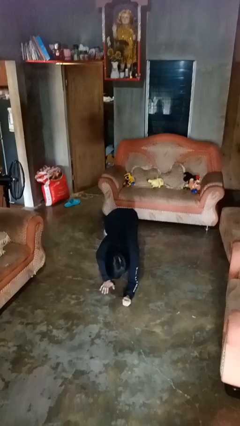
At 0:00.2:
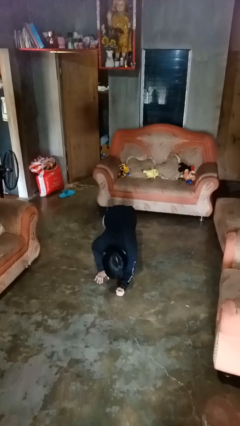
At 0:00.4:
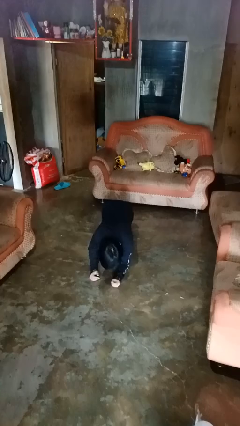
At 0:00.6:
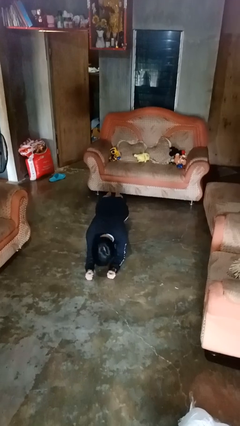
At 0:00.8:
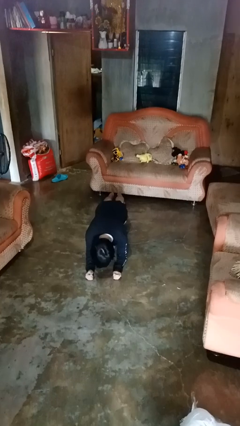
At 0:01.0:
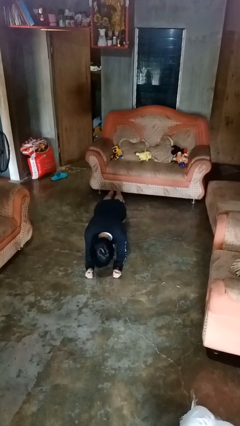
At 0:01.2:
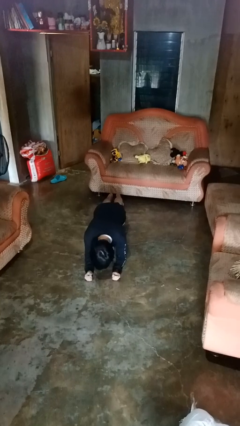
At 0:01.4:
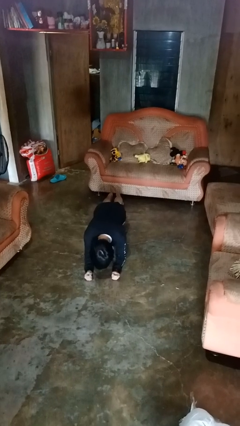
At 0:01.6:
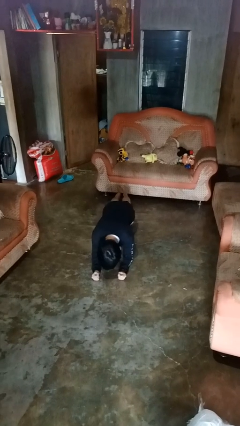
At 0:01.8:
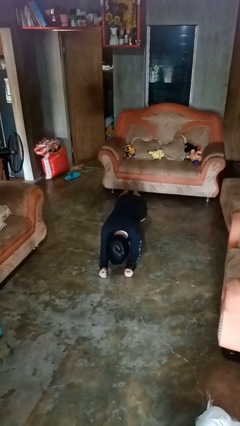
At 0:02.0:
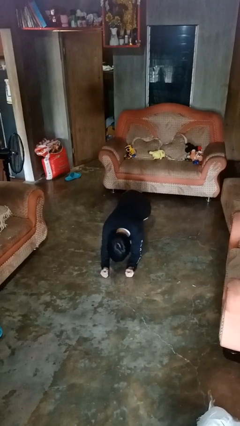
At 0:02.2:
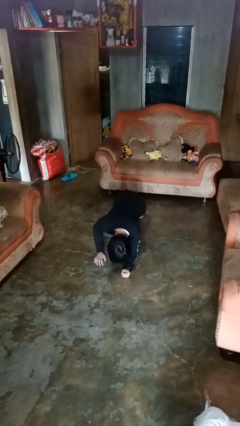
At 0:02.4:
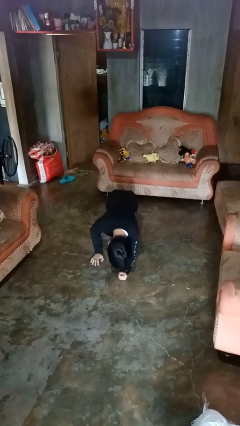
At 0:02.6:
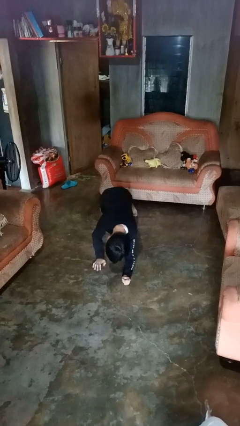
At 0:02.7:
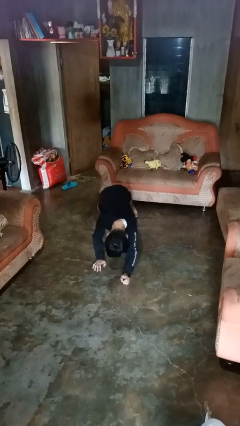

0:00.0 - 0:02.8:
person exercises with plank

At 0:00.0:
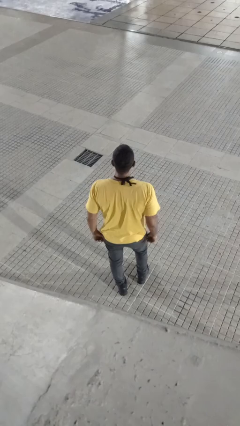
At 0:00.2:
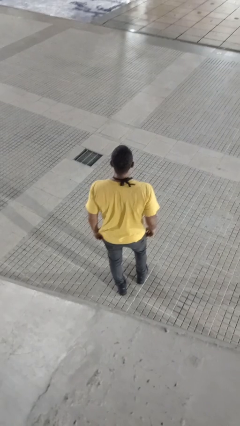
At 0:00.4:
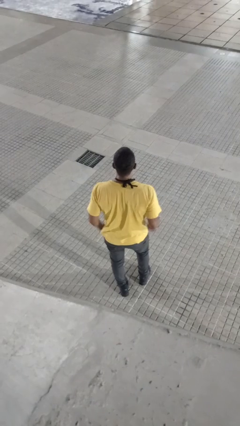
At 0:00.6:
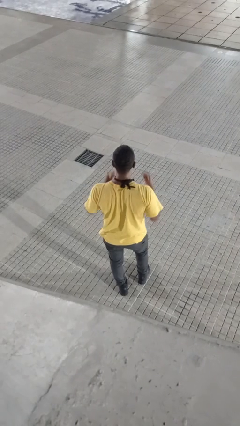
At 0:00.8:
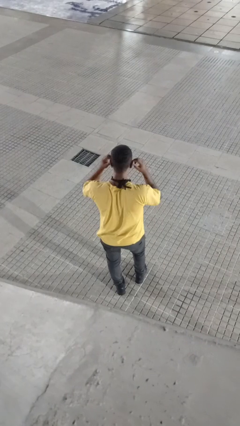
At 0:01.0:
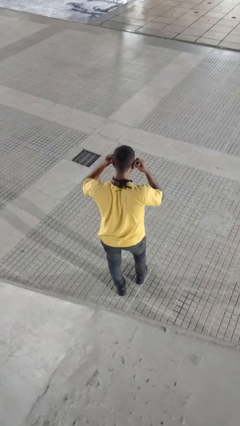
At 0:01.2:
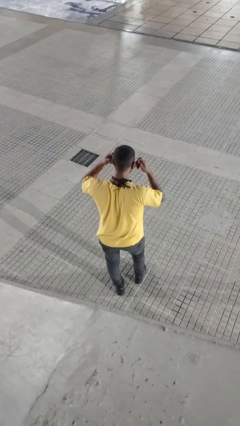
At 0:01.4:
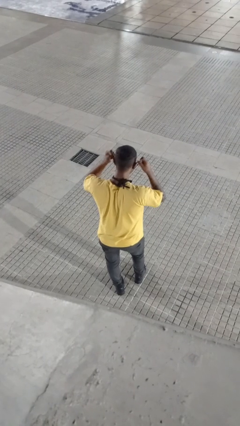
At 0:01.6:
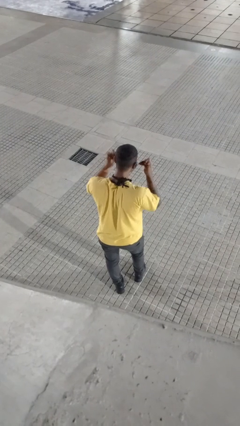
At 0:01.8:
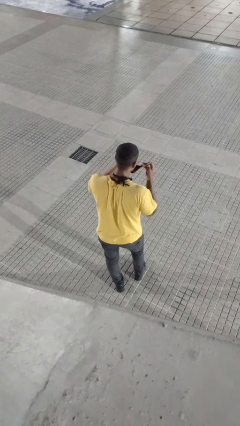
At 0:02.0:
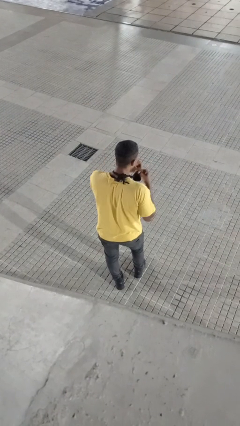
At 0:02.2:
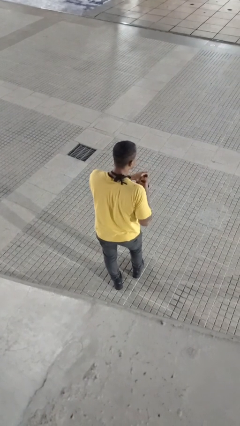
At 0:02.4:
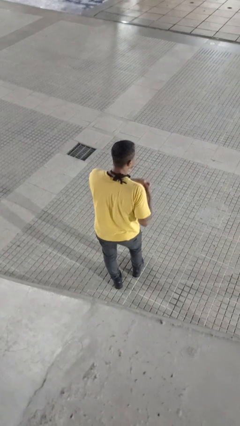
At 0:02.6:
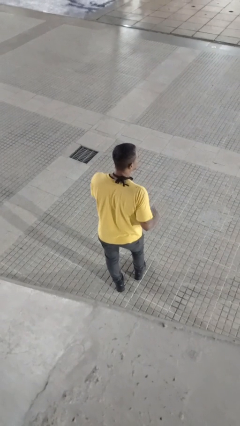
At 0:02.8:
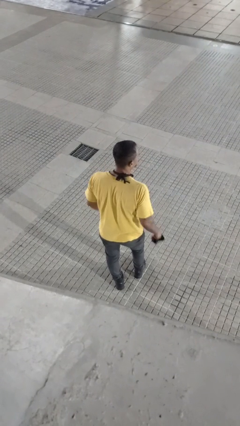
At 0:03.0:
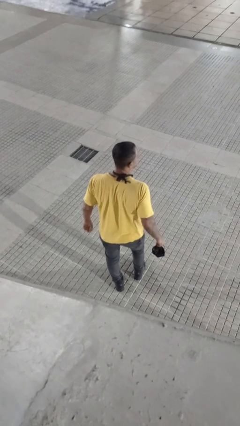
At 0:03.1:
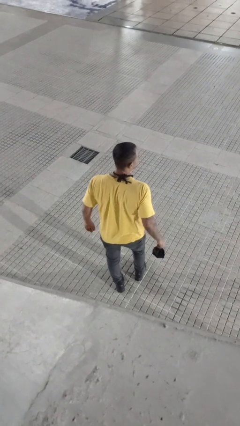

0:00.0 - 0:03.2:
person takes off facemask

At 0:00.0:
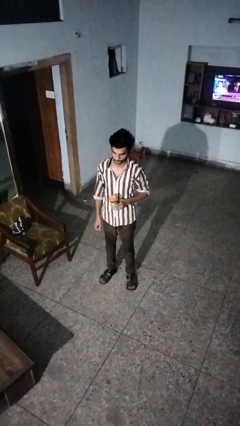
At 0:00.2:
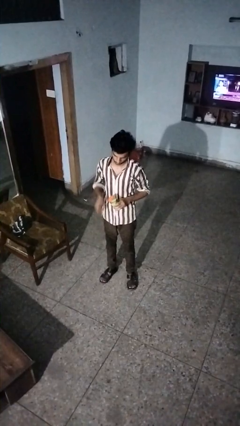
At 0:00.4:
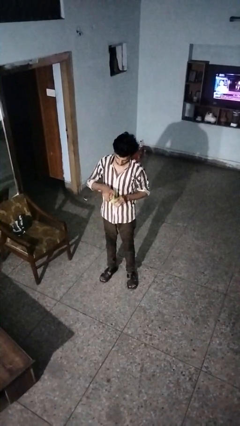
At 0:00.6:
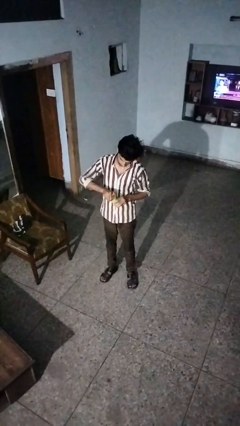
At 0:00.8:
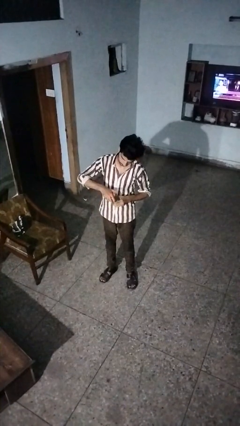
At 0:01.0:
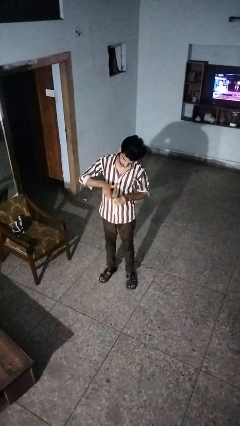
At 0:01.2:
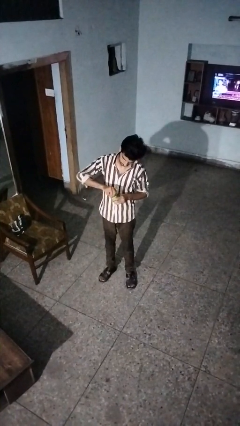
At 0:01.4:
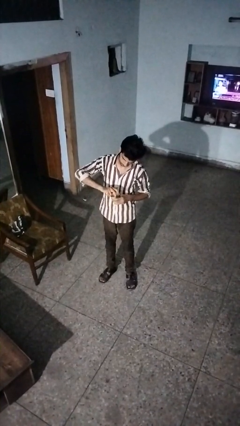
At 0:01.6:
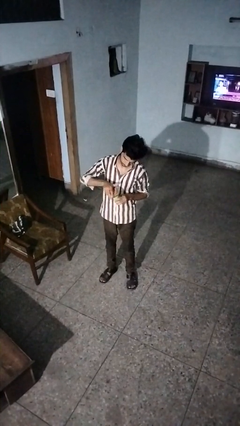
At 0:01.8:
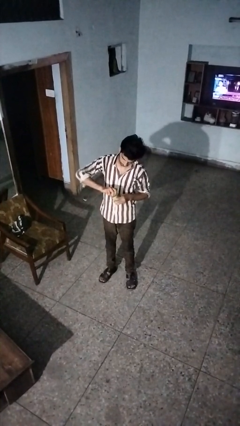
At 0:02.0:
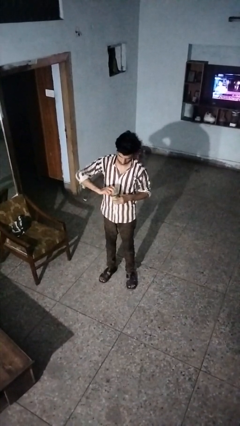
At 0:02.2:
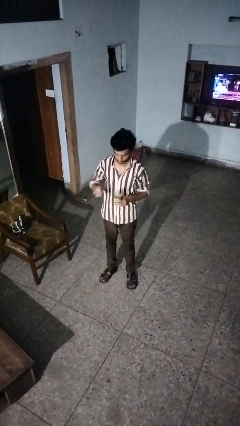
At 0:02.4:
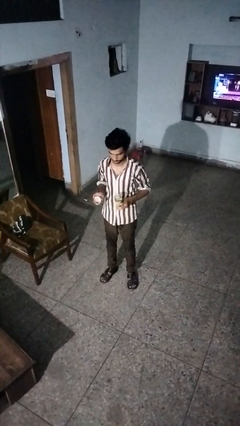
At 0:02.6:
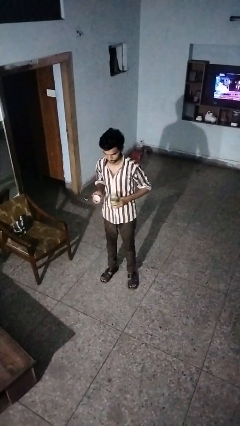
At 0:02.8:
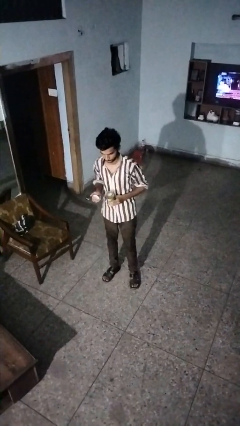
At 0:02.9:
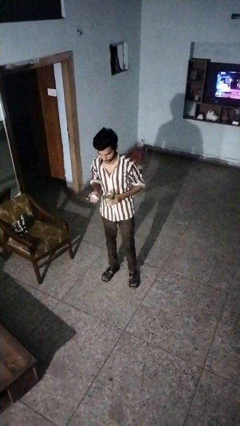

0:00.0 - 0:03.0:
person opens jar

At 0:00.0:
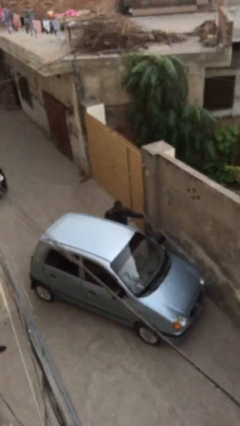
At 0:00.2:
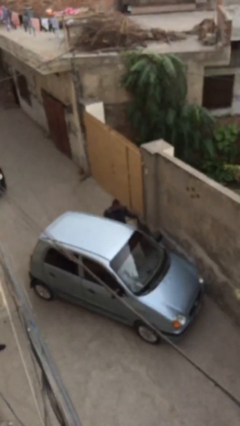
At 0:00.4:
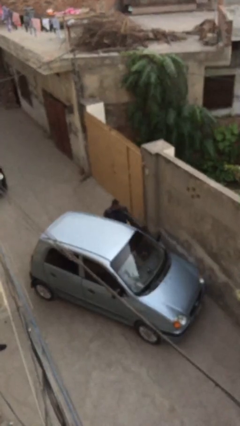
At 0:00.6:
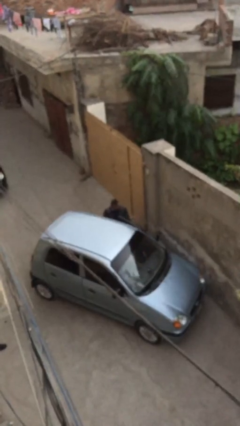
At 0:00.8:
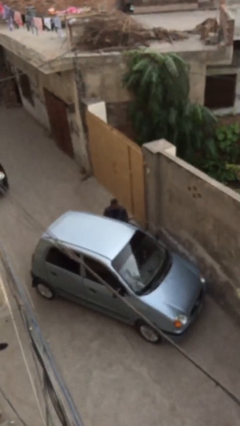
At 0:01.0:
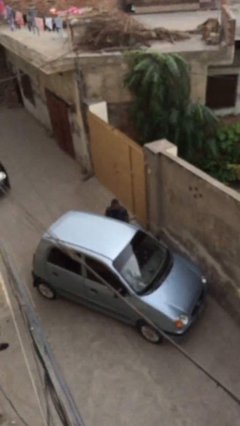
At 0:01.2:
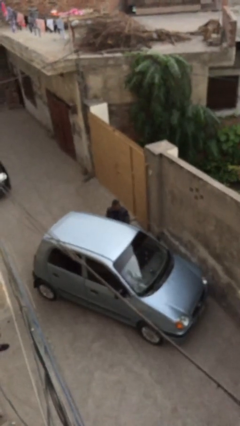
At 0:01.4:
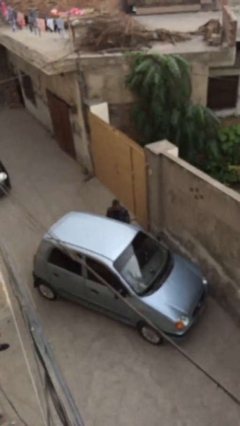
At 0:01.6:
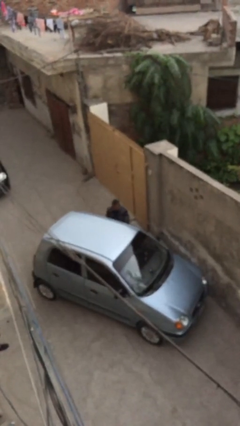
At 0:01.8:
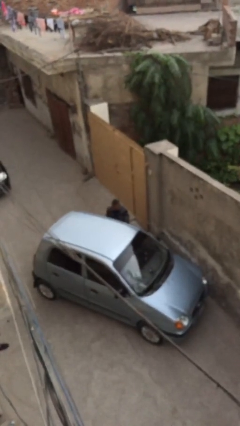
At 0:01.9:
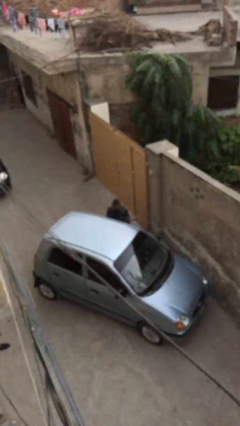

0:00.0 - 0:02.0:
person closes car door

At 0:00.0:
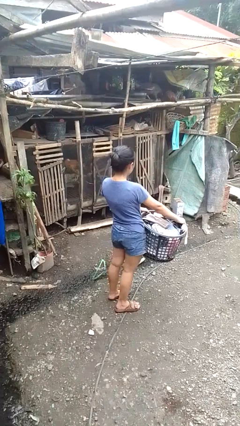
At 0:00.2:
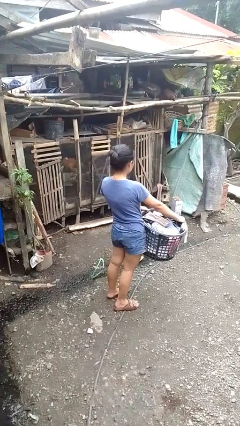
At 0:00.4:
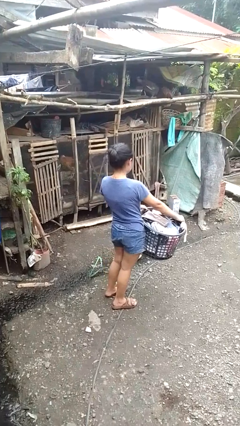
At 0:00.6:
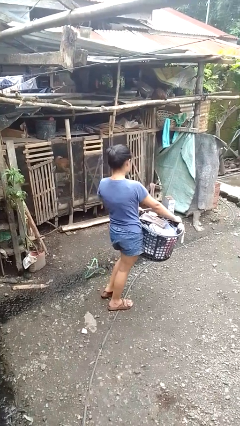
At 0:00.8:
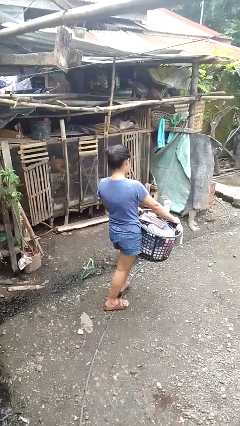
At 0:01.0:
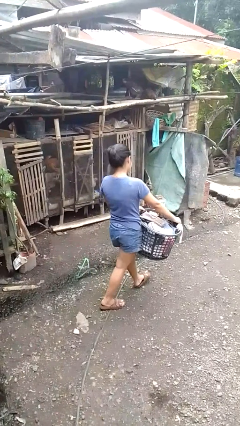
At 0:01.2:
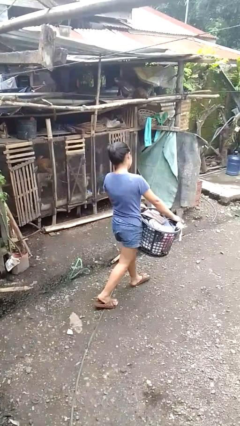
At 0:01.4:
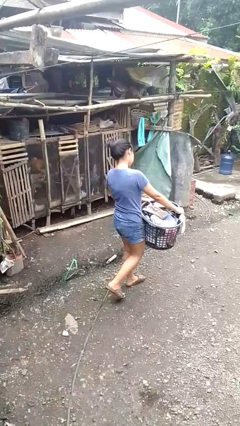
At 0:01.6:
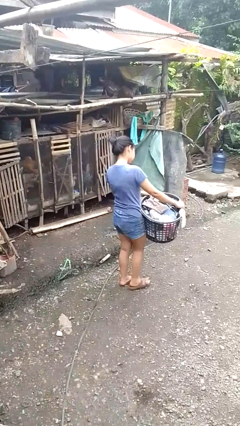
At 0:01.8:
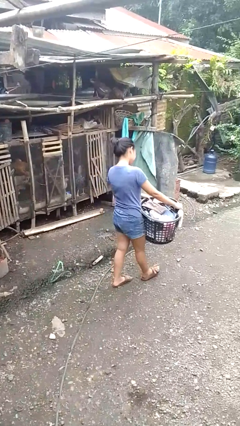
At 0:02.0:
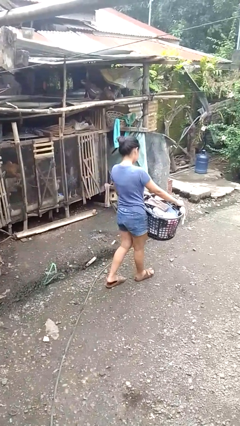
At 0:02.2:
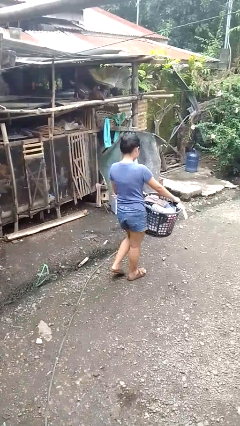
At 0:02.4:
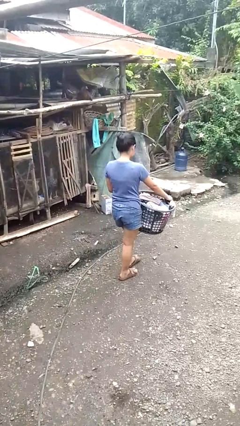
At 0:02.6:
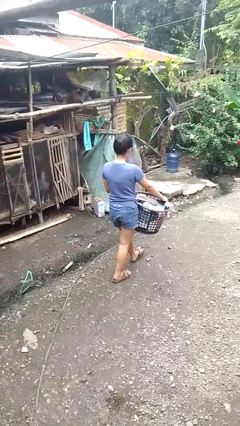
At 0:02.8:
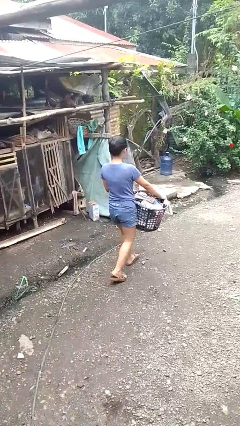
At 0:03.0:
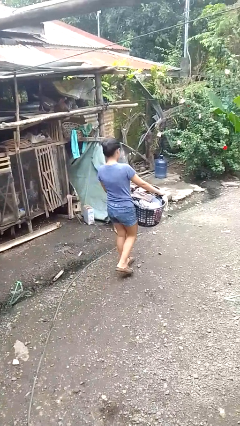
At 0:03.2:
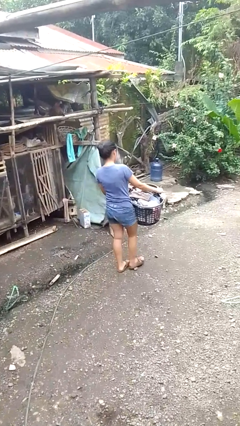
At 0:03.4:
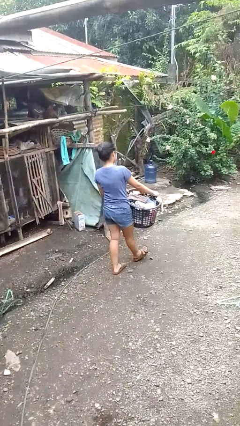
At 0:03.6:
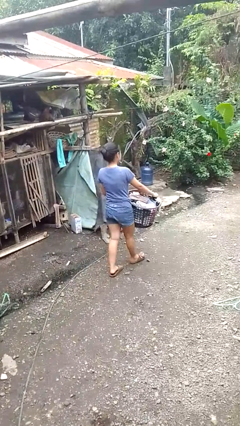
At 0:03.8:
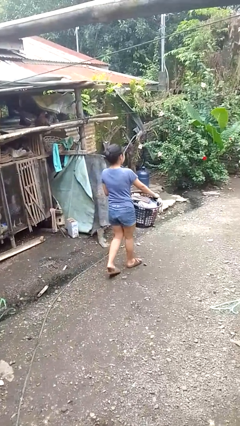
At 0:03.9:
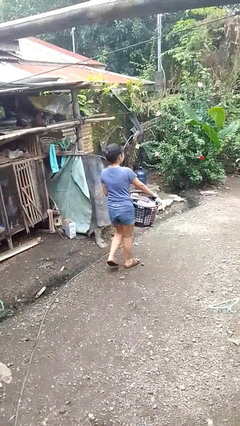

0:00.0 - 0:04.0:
person carries laundry basket

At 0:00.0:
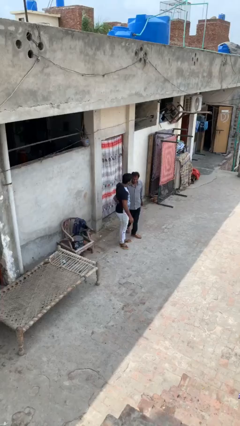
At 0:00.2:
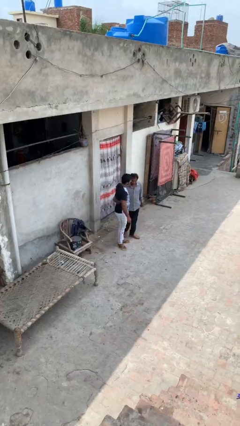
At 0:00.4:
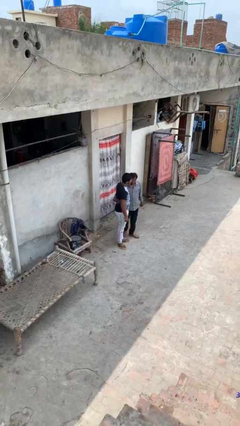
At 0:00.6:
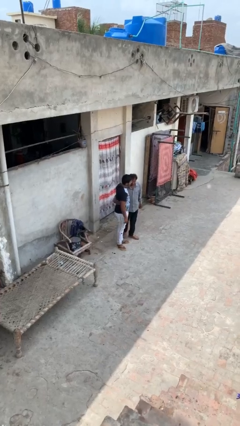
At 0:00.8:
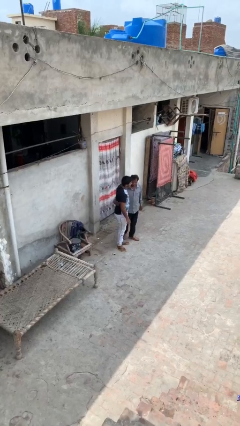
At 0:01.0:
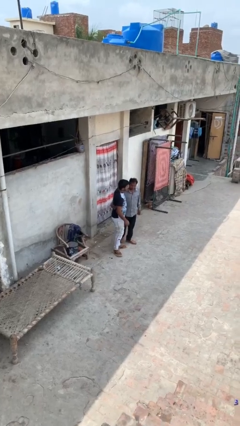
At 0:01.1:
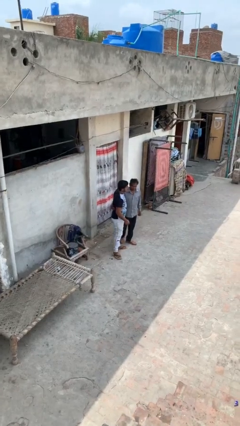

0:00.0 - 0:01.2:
person embraces person

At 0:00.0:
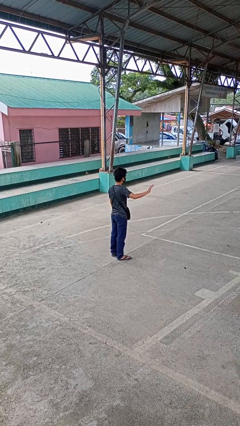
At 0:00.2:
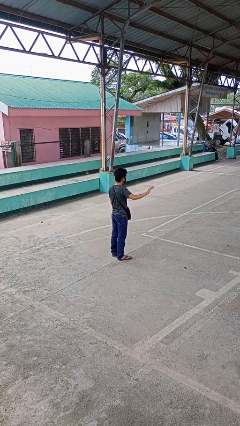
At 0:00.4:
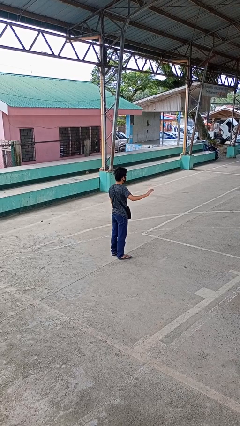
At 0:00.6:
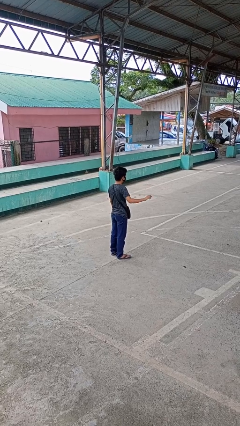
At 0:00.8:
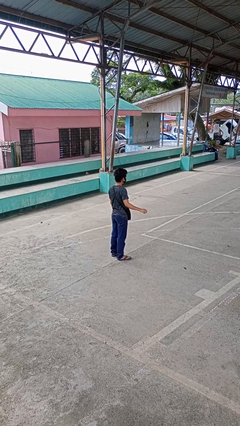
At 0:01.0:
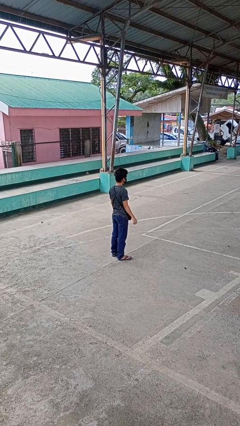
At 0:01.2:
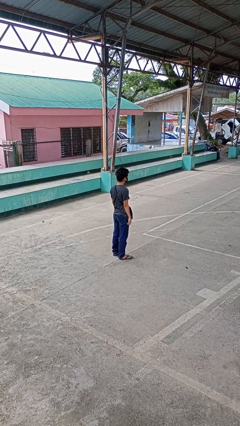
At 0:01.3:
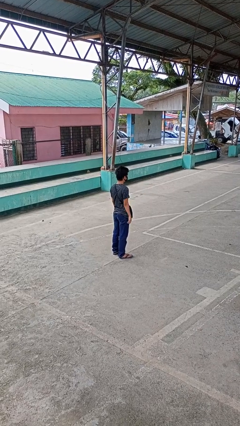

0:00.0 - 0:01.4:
person gestures swipe right
